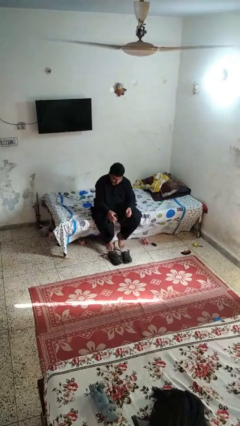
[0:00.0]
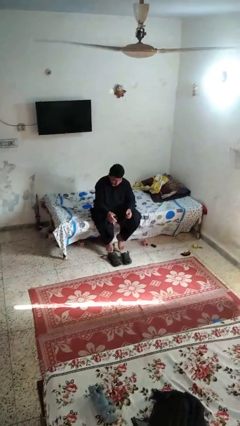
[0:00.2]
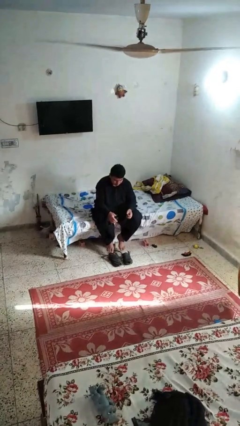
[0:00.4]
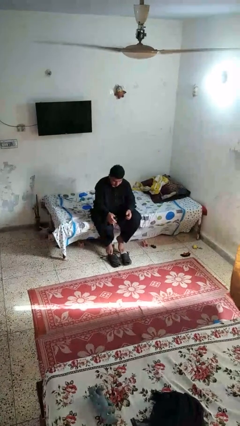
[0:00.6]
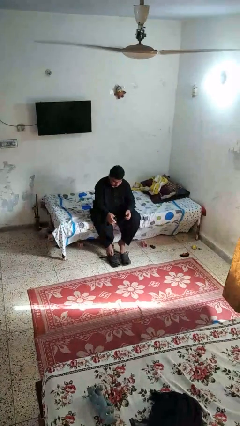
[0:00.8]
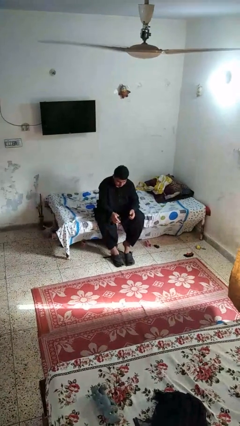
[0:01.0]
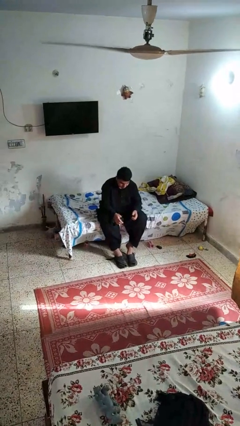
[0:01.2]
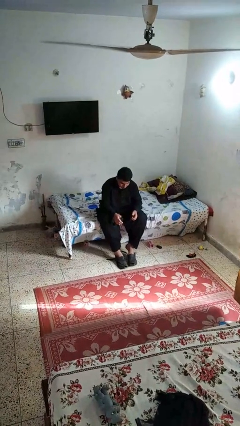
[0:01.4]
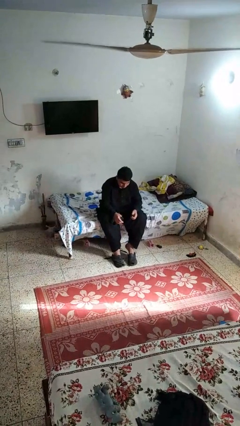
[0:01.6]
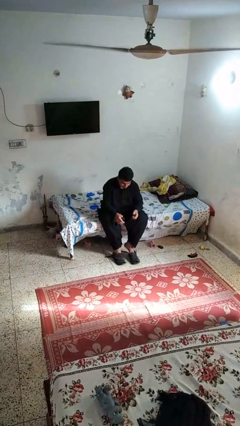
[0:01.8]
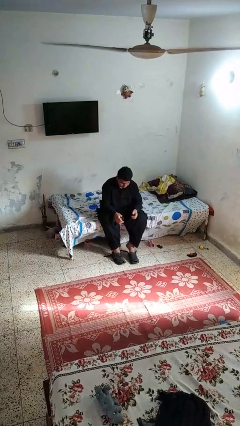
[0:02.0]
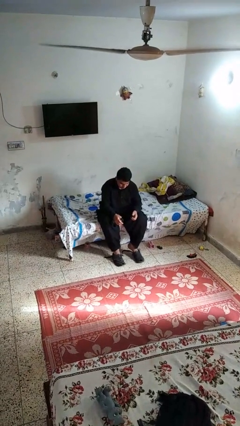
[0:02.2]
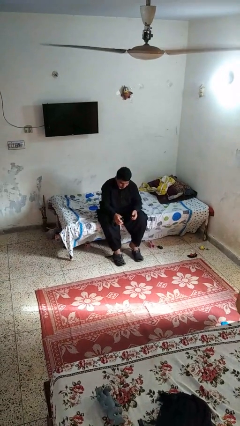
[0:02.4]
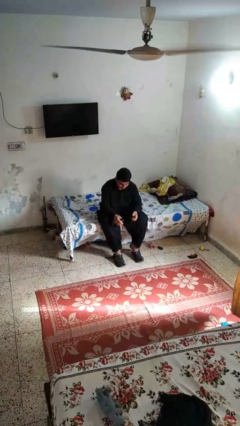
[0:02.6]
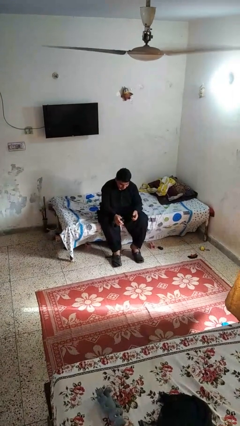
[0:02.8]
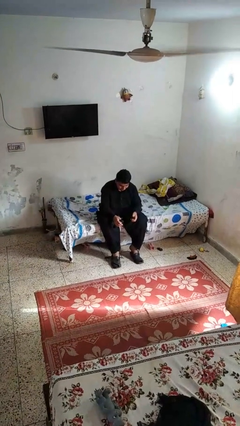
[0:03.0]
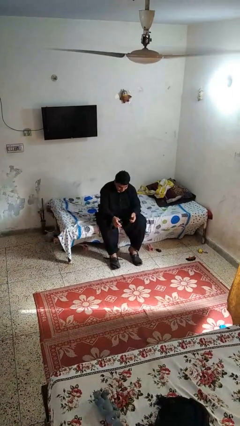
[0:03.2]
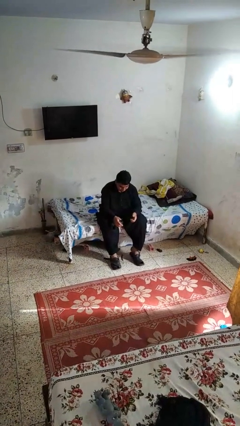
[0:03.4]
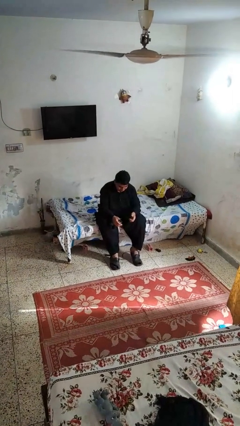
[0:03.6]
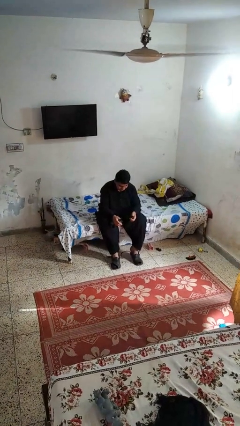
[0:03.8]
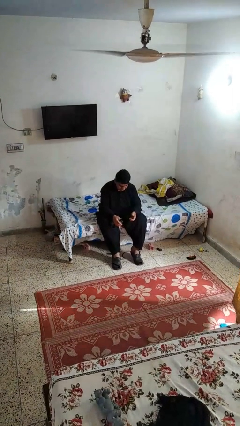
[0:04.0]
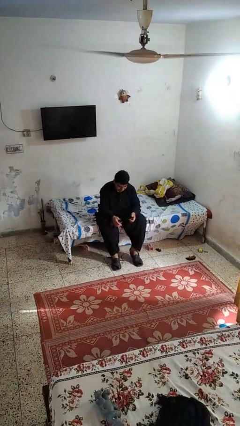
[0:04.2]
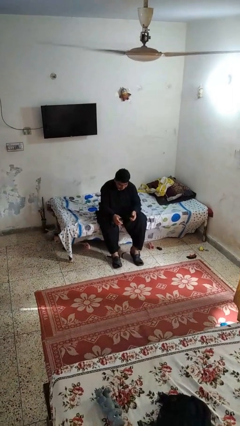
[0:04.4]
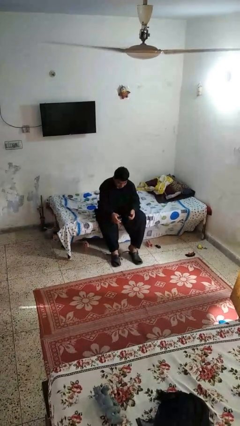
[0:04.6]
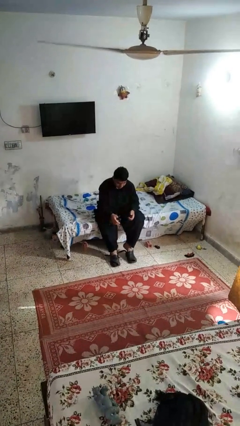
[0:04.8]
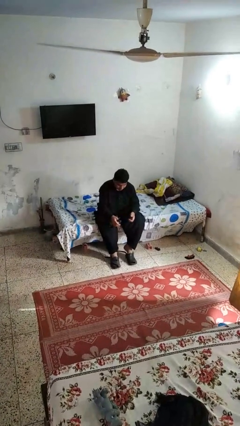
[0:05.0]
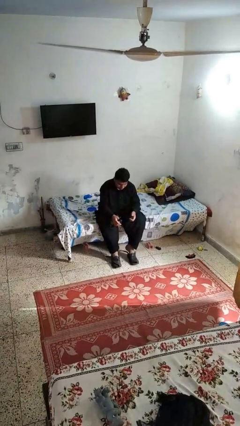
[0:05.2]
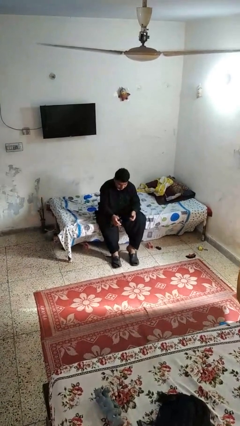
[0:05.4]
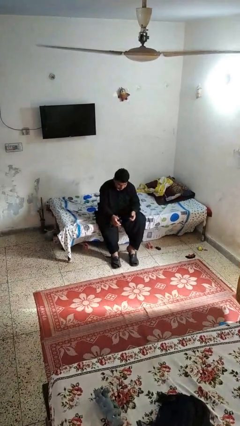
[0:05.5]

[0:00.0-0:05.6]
person puts on shoes

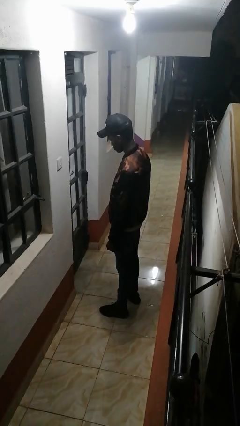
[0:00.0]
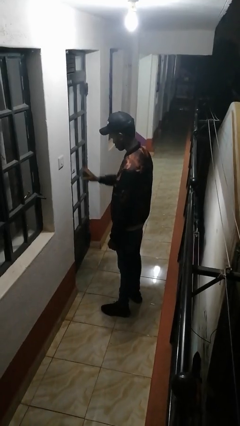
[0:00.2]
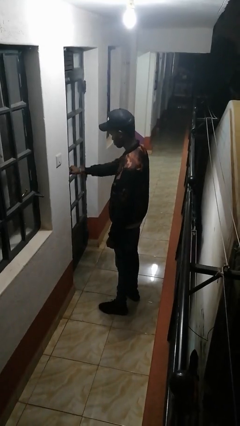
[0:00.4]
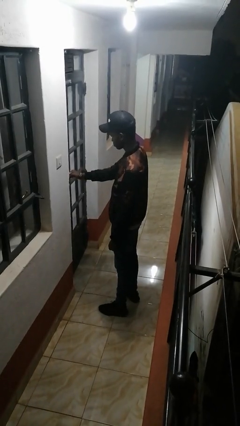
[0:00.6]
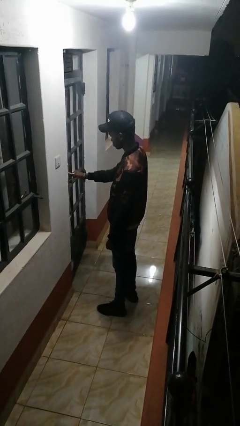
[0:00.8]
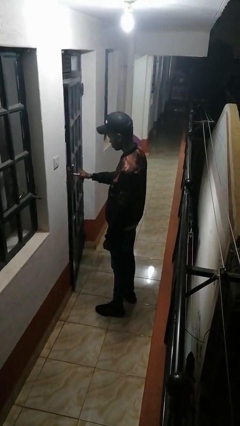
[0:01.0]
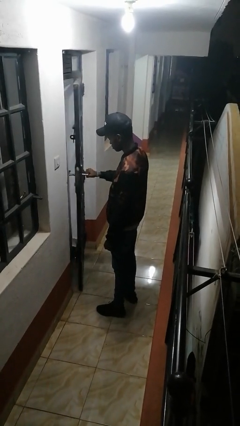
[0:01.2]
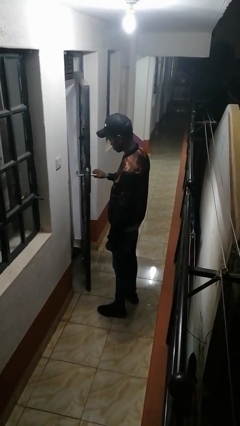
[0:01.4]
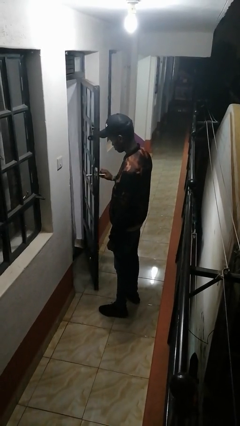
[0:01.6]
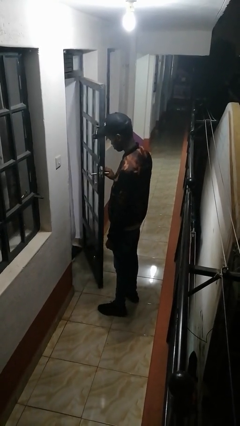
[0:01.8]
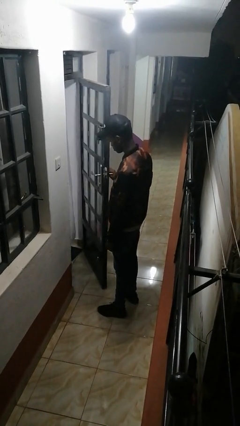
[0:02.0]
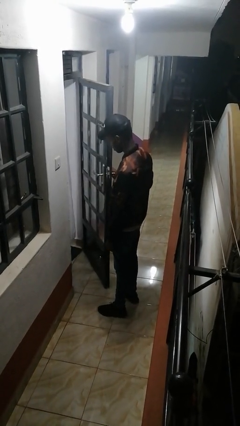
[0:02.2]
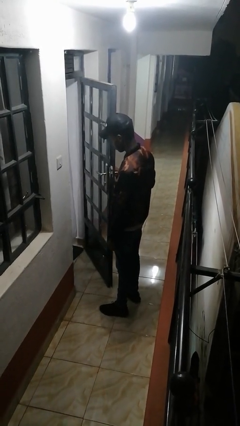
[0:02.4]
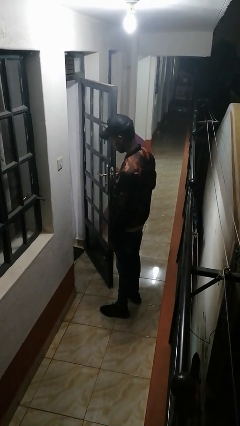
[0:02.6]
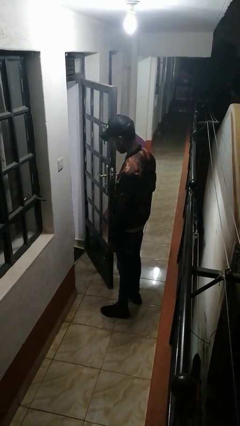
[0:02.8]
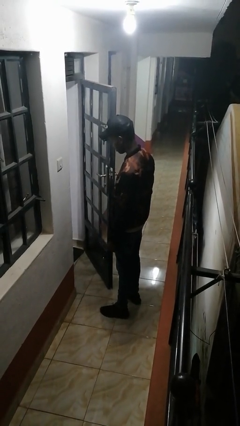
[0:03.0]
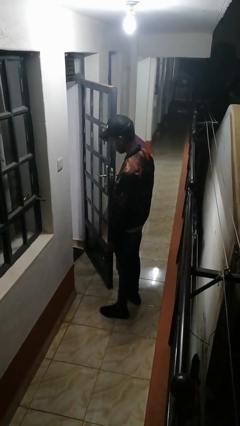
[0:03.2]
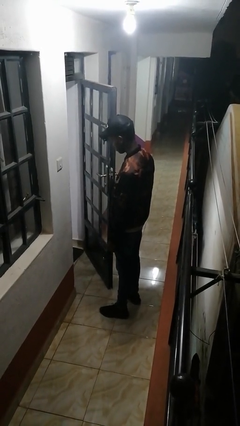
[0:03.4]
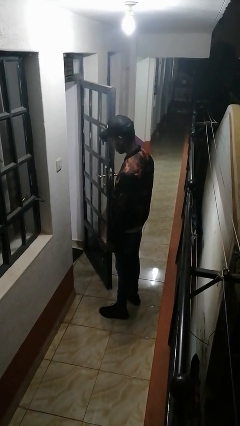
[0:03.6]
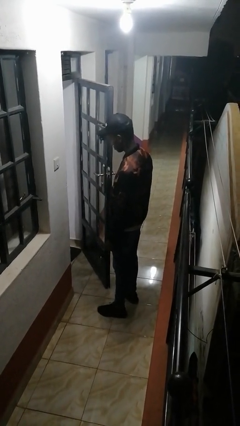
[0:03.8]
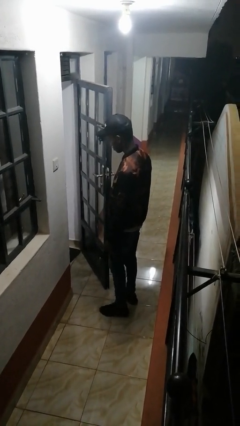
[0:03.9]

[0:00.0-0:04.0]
person opens facility door

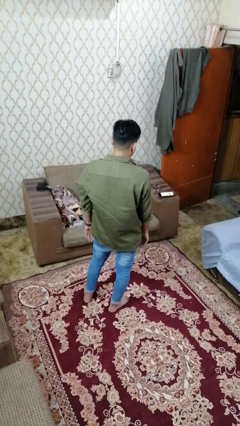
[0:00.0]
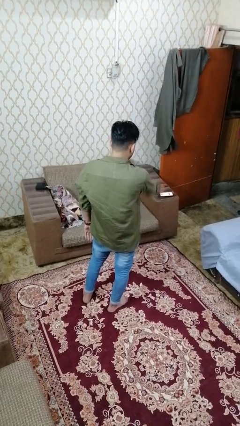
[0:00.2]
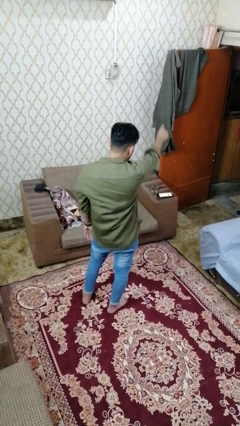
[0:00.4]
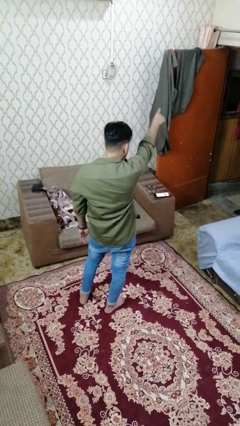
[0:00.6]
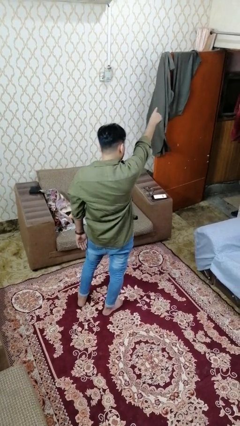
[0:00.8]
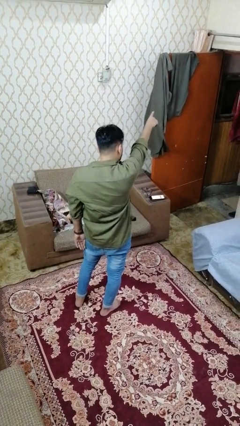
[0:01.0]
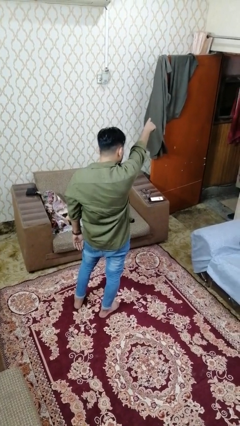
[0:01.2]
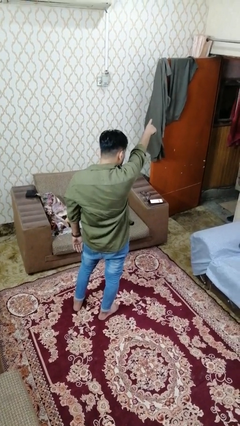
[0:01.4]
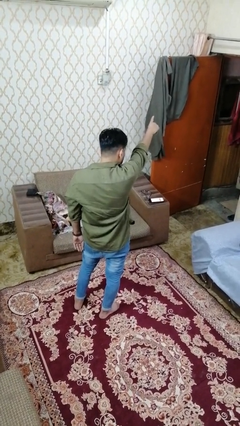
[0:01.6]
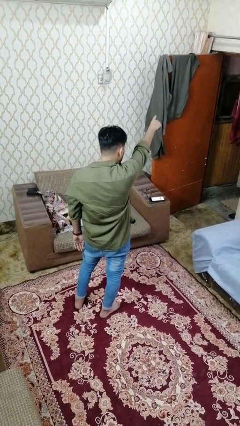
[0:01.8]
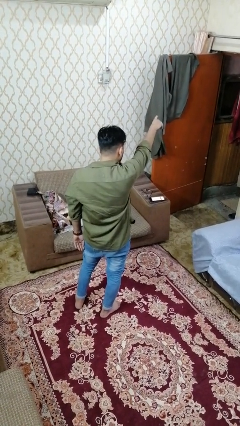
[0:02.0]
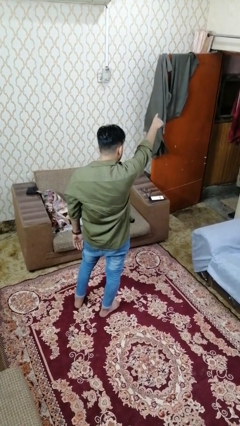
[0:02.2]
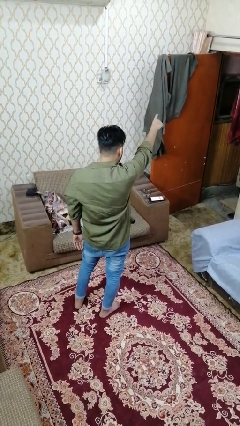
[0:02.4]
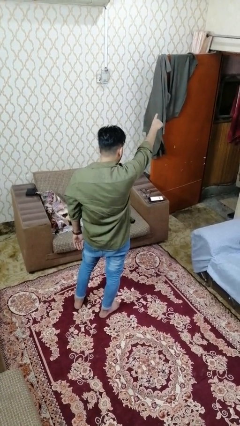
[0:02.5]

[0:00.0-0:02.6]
person points at person

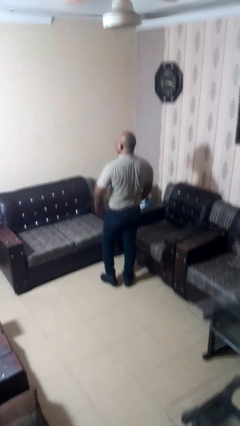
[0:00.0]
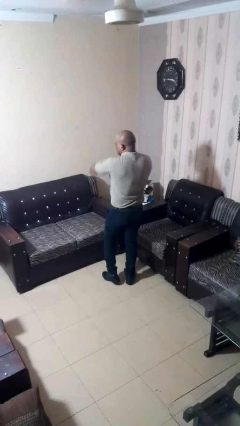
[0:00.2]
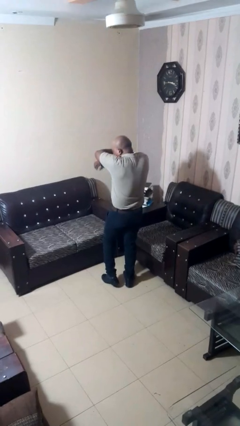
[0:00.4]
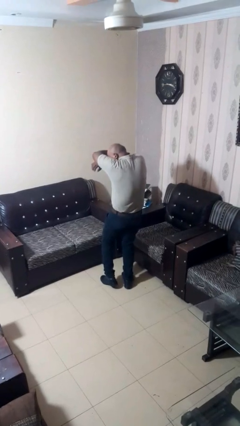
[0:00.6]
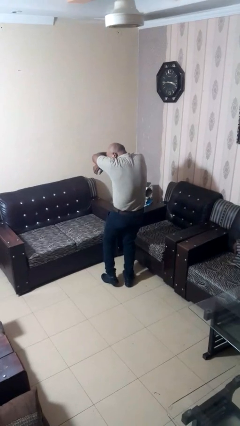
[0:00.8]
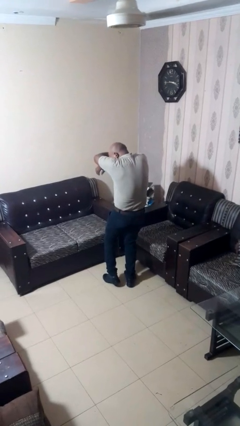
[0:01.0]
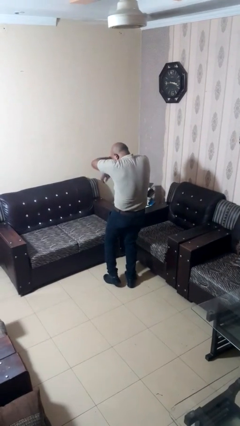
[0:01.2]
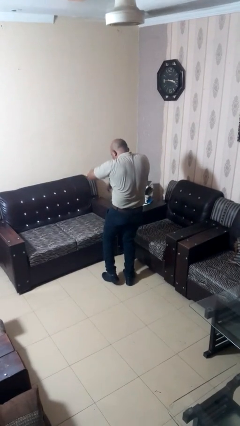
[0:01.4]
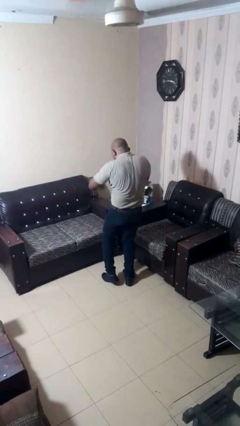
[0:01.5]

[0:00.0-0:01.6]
person sneezes into arm

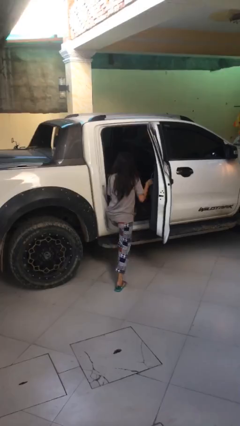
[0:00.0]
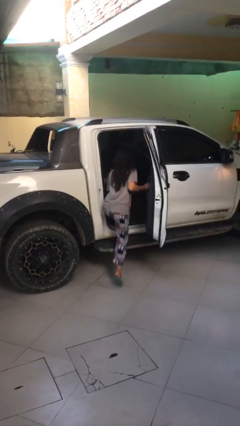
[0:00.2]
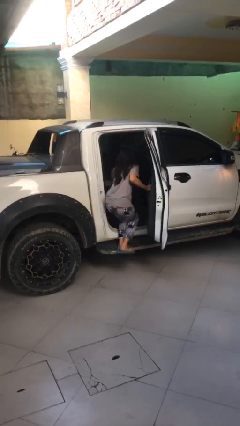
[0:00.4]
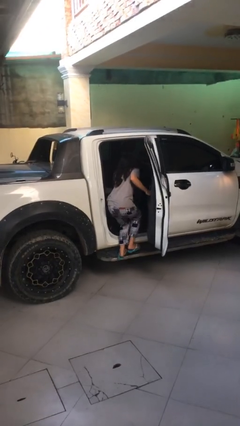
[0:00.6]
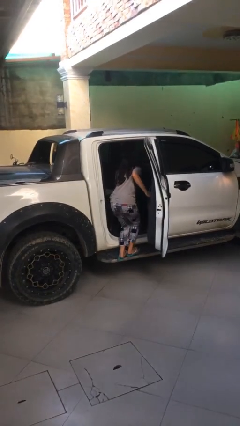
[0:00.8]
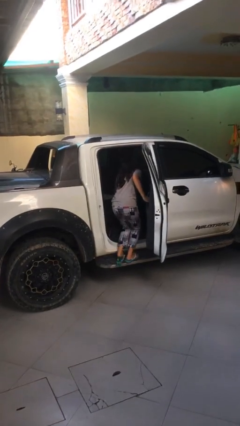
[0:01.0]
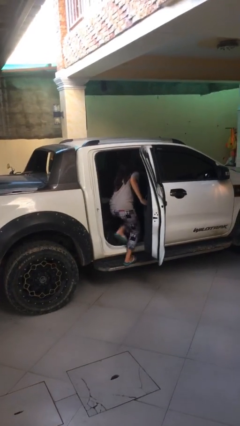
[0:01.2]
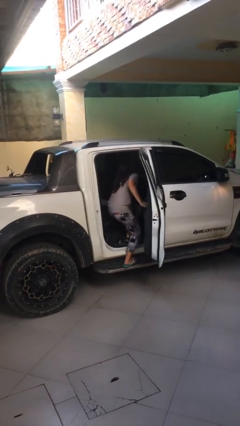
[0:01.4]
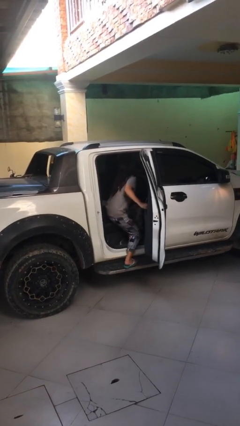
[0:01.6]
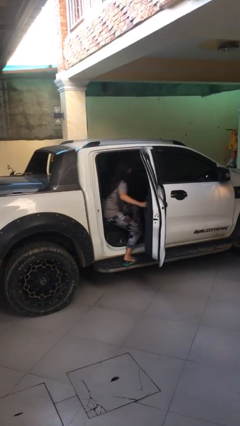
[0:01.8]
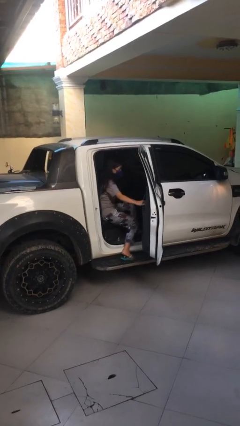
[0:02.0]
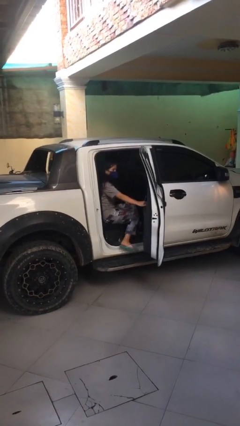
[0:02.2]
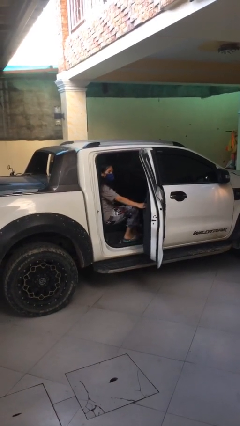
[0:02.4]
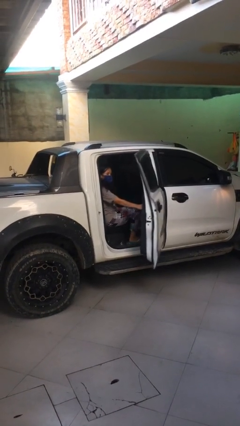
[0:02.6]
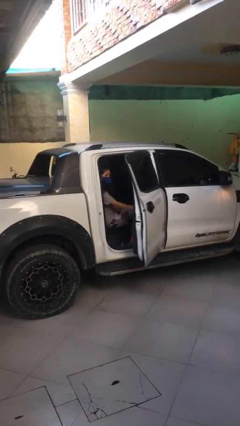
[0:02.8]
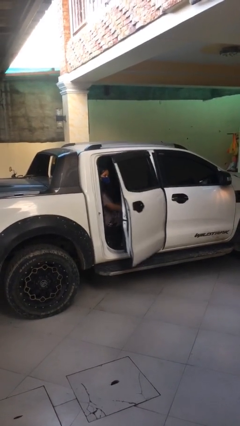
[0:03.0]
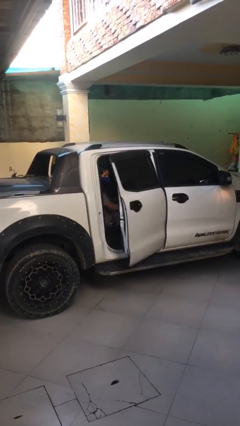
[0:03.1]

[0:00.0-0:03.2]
person enters car

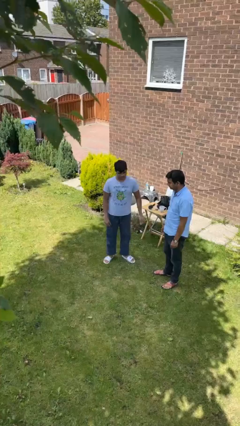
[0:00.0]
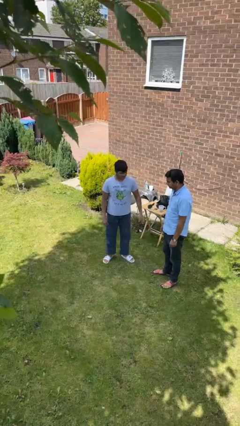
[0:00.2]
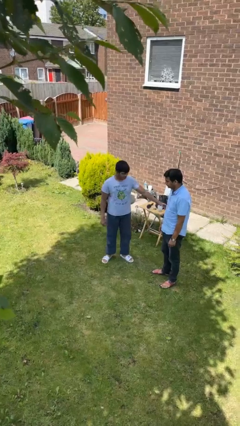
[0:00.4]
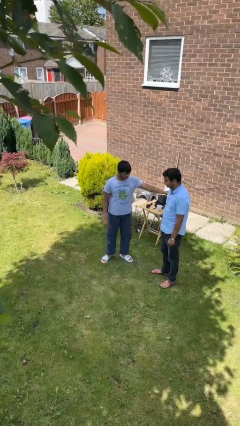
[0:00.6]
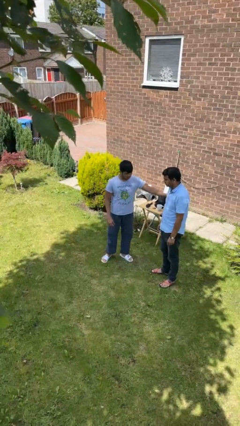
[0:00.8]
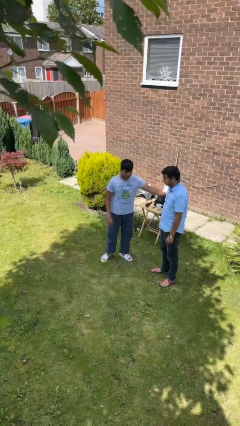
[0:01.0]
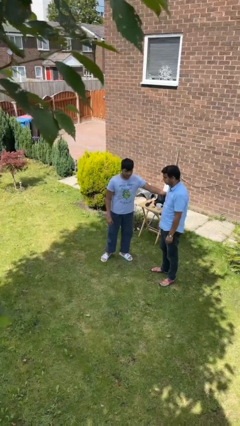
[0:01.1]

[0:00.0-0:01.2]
person grabs person by bicep
